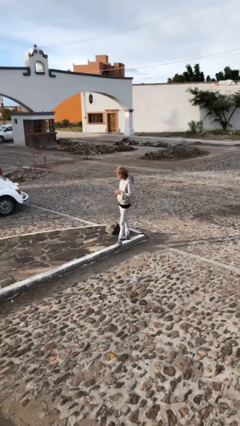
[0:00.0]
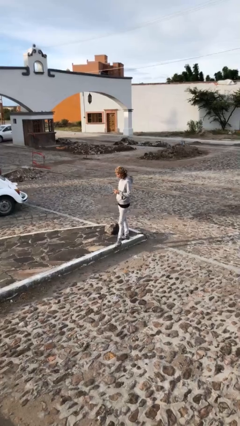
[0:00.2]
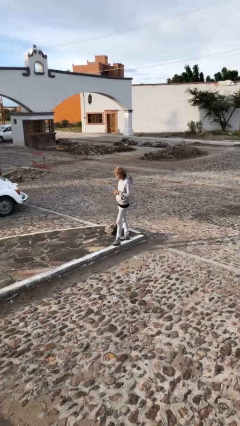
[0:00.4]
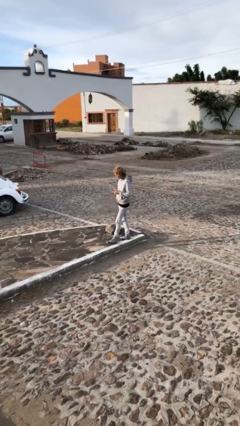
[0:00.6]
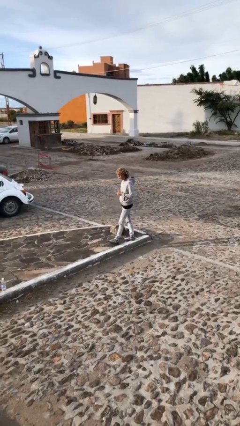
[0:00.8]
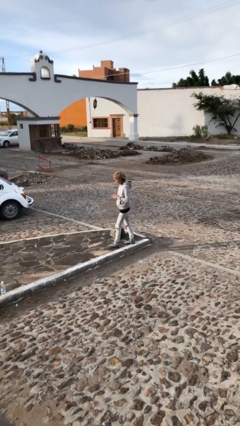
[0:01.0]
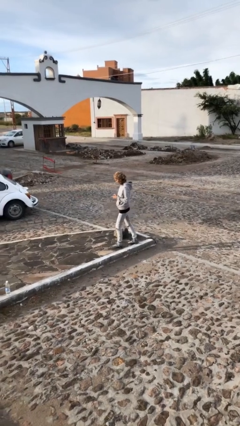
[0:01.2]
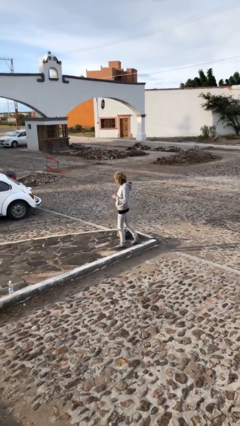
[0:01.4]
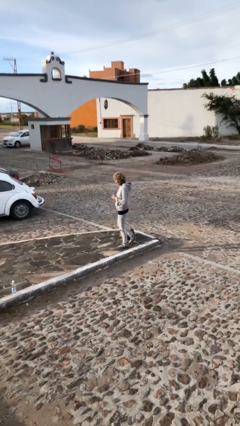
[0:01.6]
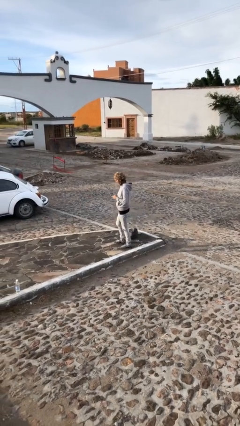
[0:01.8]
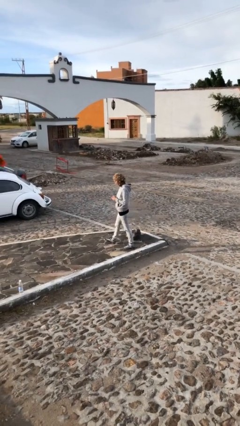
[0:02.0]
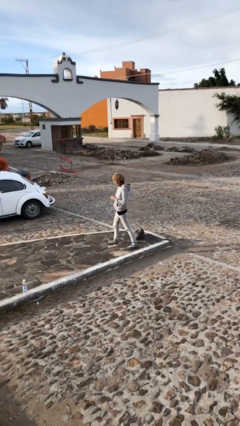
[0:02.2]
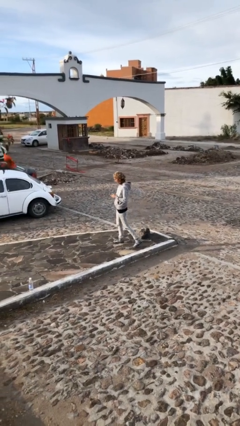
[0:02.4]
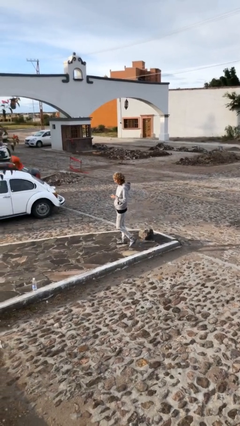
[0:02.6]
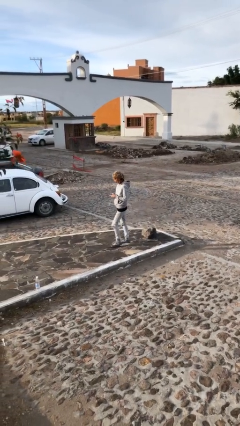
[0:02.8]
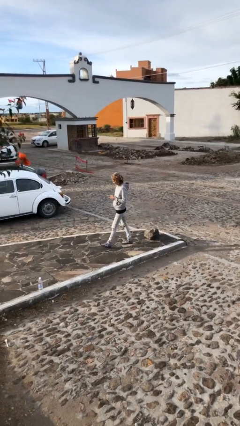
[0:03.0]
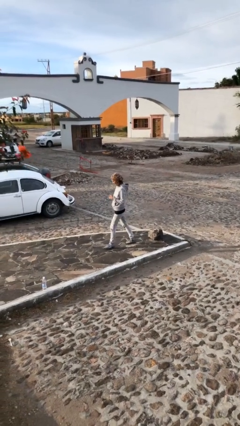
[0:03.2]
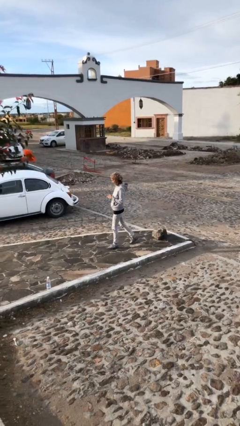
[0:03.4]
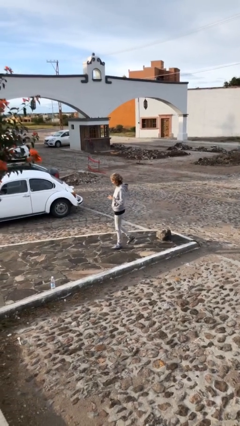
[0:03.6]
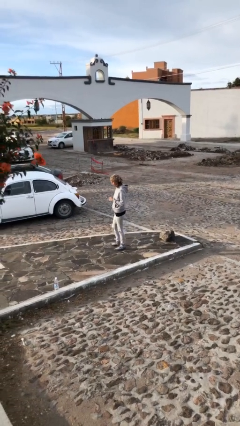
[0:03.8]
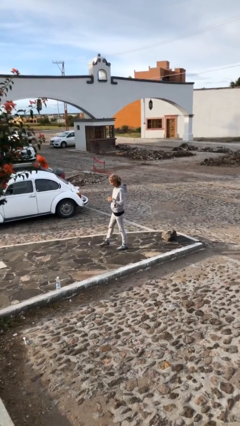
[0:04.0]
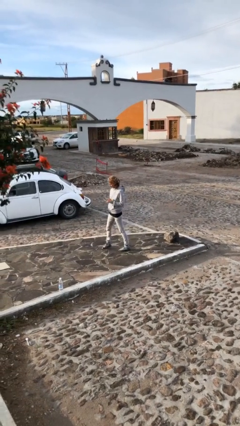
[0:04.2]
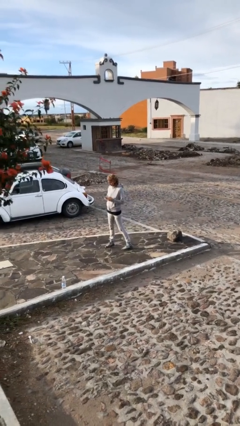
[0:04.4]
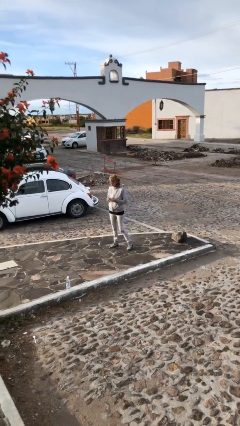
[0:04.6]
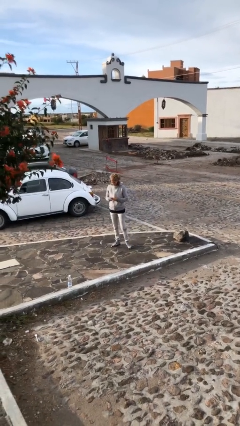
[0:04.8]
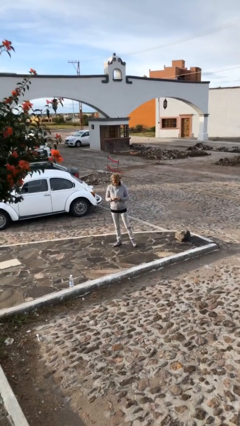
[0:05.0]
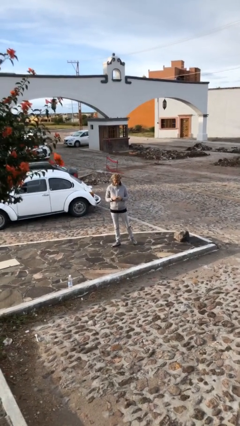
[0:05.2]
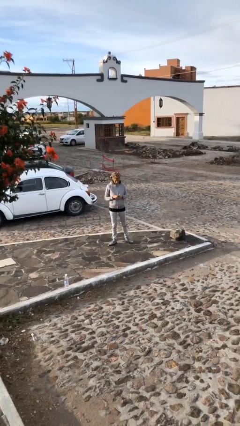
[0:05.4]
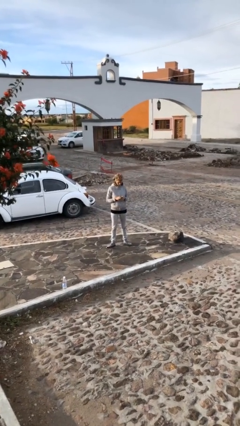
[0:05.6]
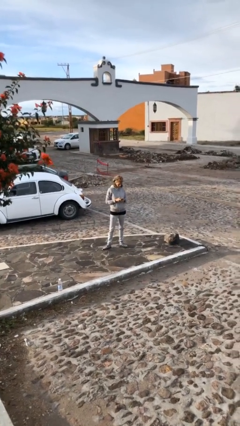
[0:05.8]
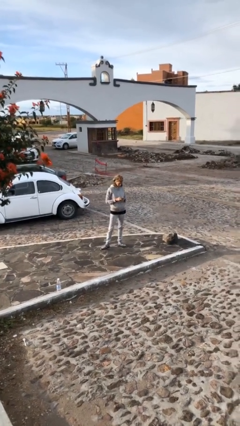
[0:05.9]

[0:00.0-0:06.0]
person texts on phone

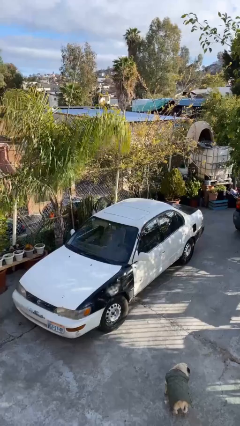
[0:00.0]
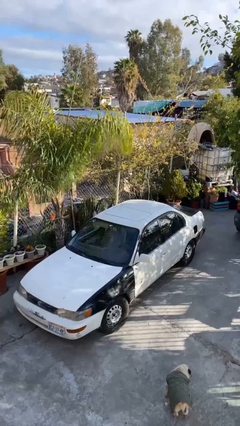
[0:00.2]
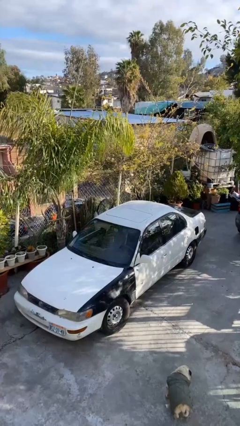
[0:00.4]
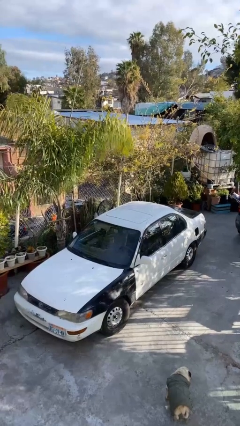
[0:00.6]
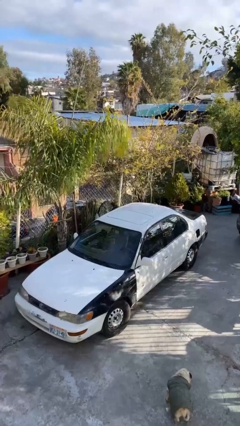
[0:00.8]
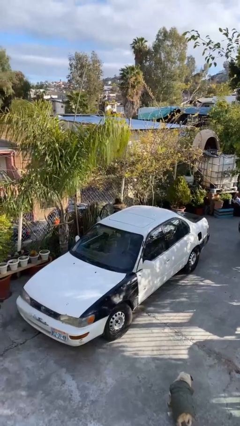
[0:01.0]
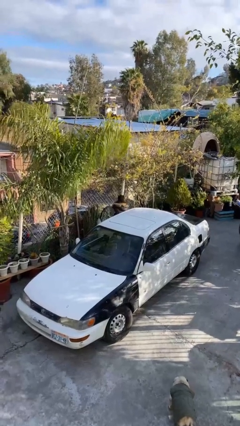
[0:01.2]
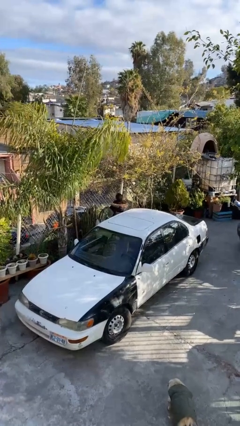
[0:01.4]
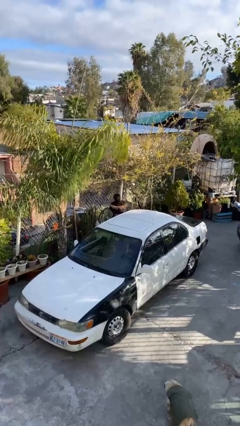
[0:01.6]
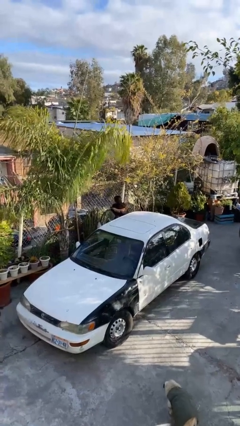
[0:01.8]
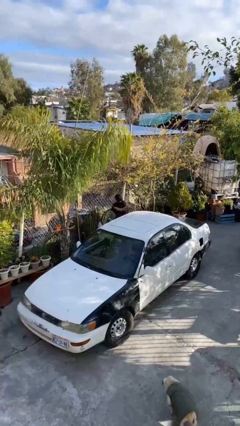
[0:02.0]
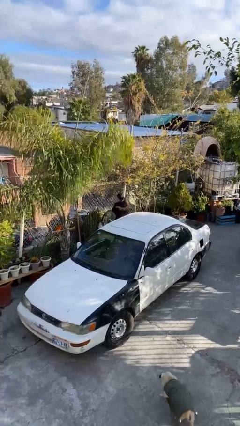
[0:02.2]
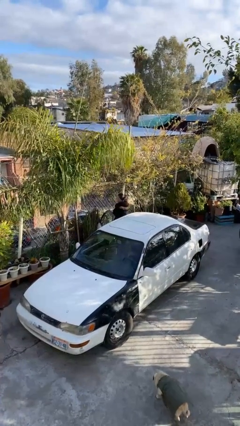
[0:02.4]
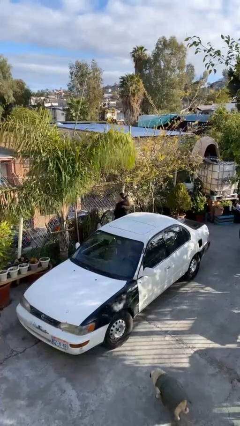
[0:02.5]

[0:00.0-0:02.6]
person exits car

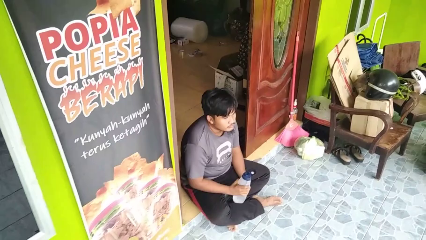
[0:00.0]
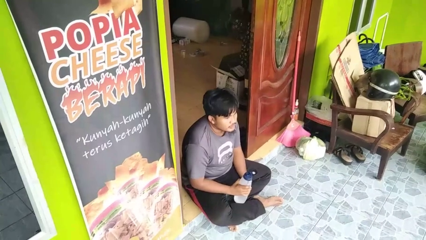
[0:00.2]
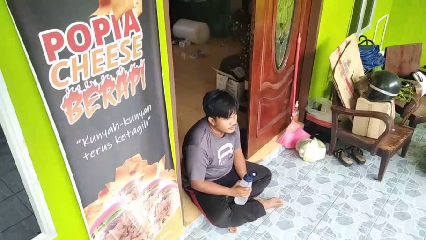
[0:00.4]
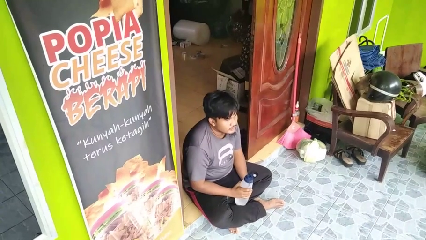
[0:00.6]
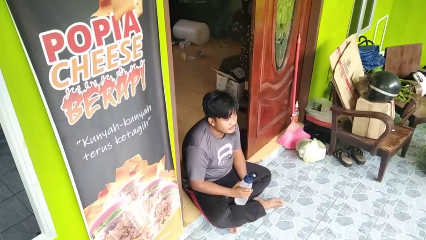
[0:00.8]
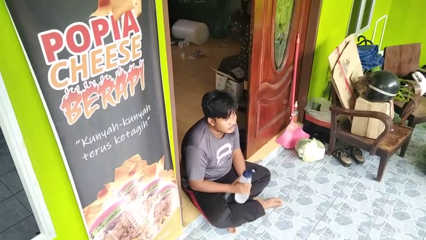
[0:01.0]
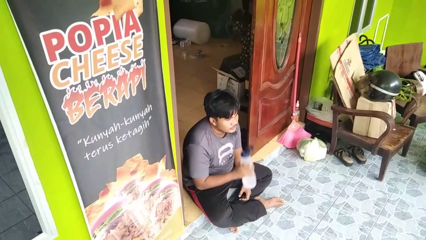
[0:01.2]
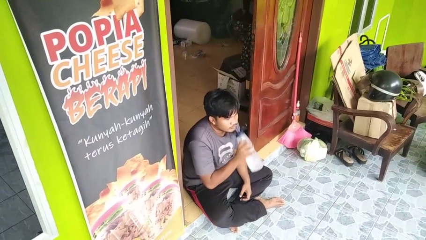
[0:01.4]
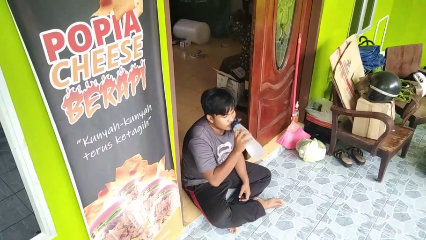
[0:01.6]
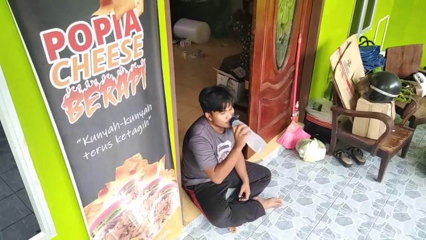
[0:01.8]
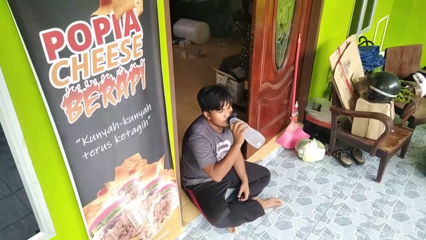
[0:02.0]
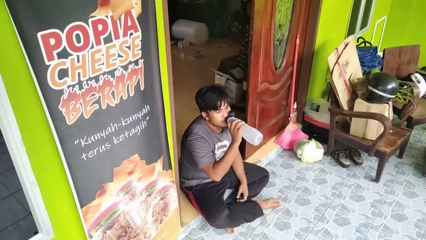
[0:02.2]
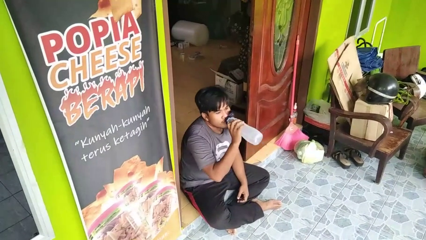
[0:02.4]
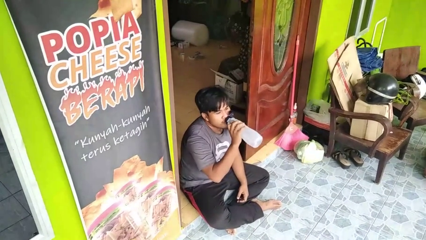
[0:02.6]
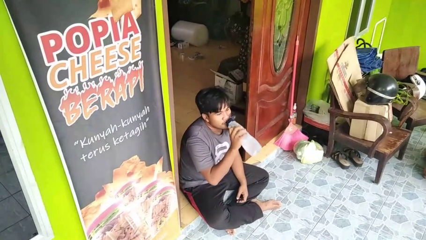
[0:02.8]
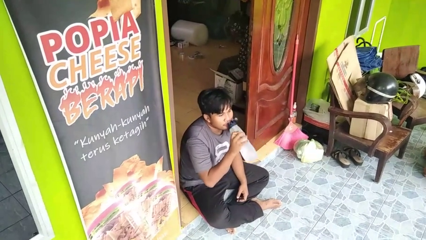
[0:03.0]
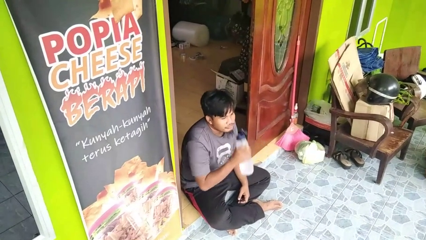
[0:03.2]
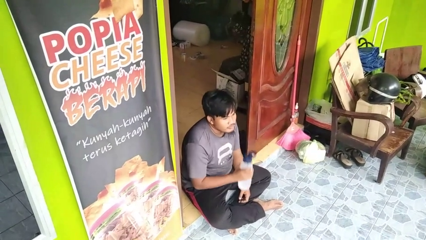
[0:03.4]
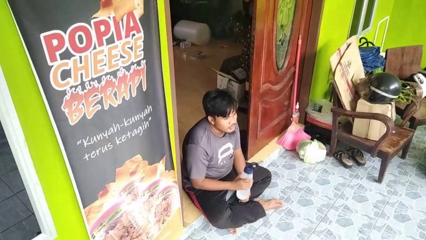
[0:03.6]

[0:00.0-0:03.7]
person drinks from bottle

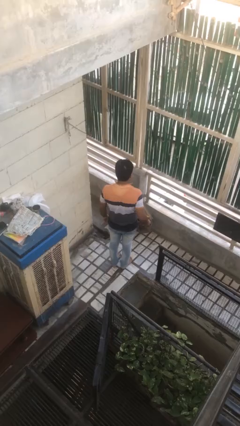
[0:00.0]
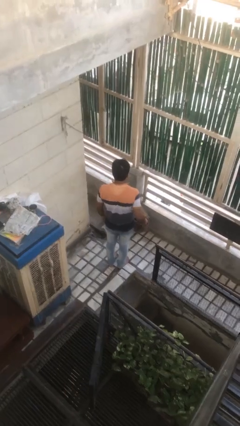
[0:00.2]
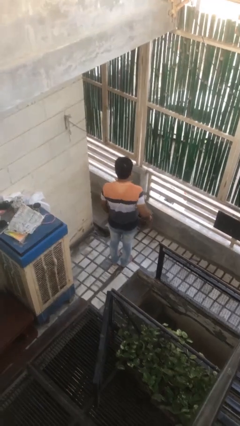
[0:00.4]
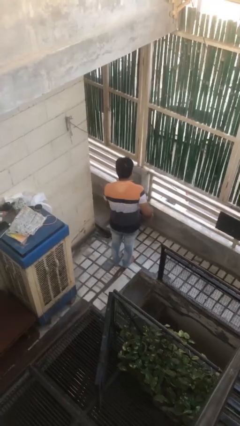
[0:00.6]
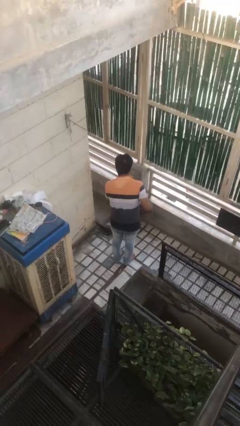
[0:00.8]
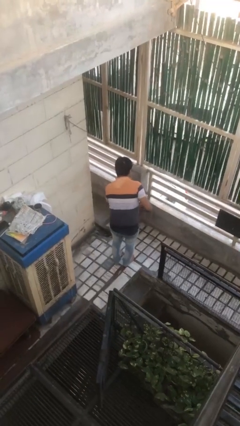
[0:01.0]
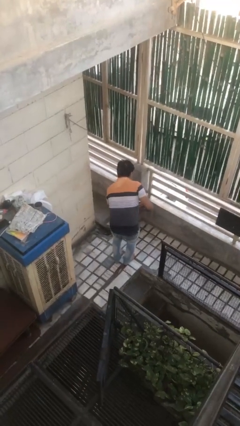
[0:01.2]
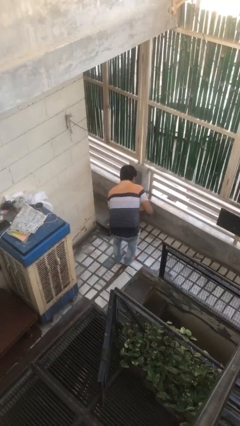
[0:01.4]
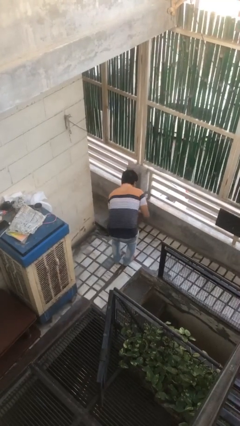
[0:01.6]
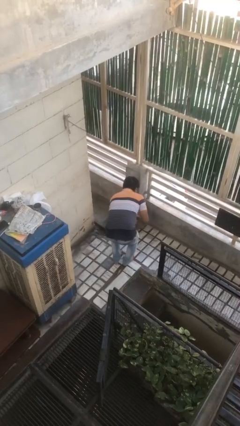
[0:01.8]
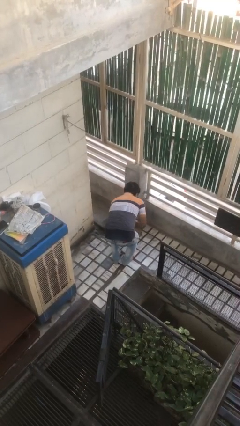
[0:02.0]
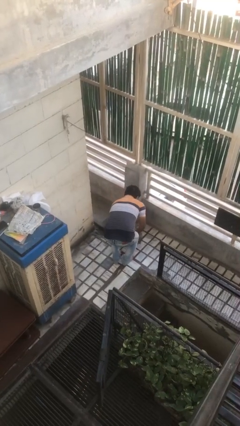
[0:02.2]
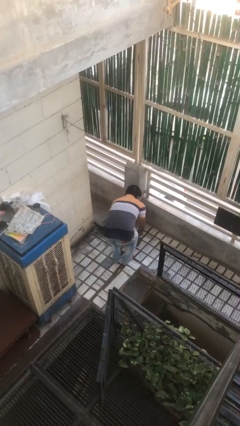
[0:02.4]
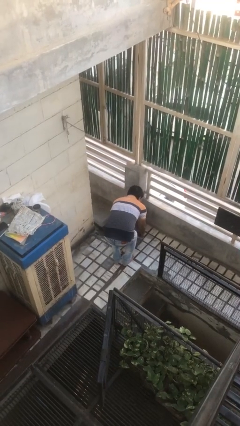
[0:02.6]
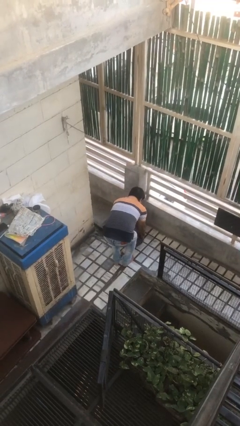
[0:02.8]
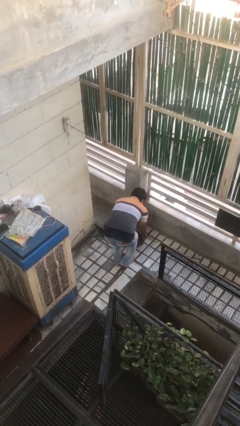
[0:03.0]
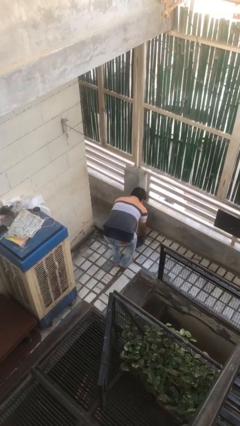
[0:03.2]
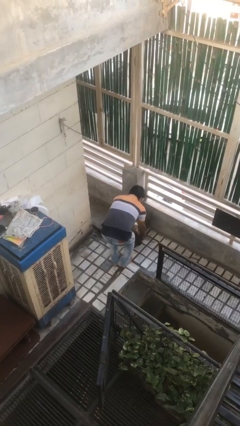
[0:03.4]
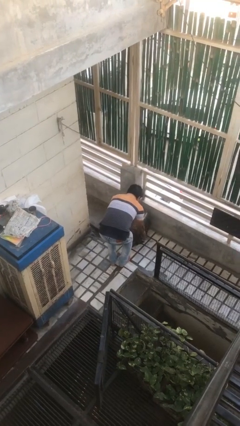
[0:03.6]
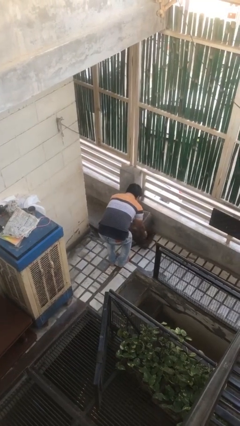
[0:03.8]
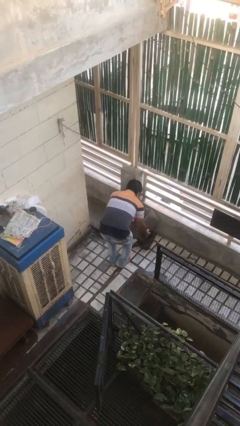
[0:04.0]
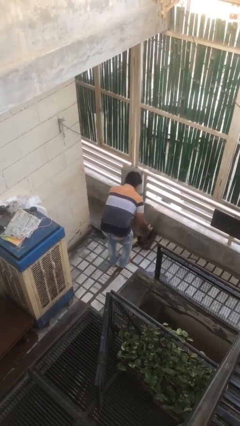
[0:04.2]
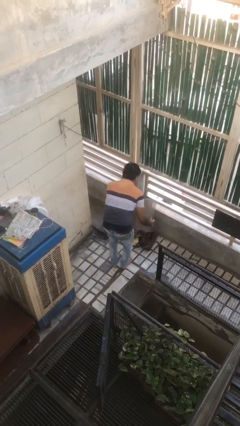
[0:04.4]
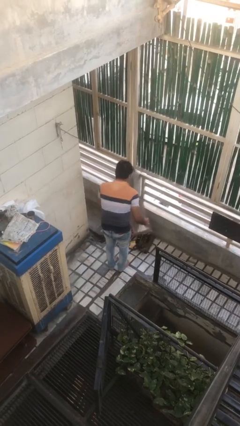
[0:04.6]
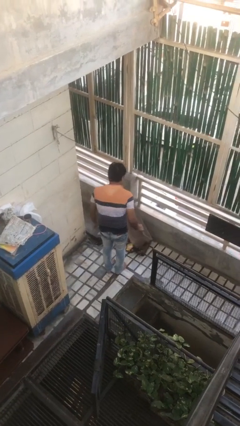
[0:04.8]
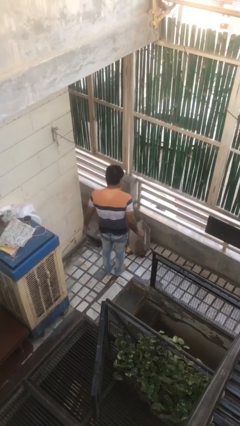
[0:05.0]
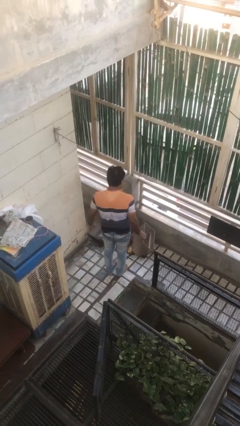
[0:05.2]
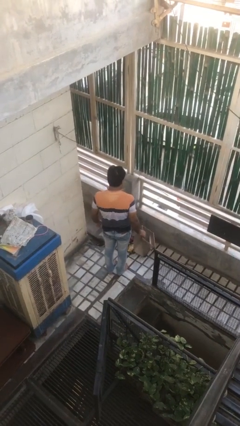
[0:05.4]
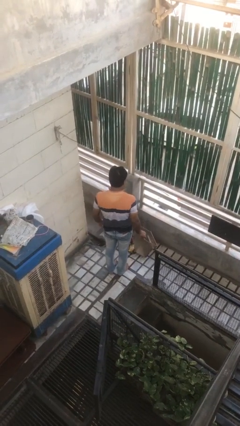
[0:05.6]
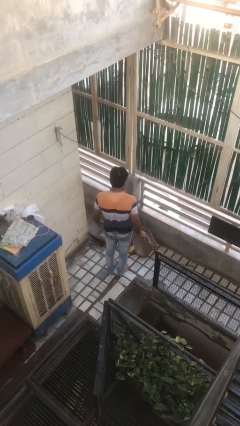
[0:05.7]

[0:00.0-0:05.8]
person unloads box onto floor
